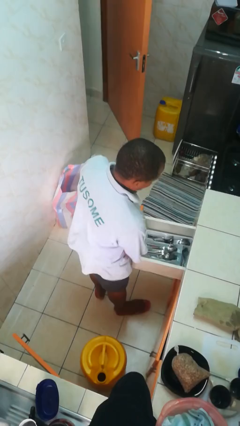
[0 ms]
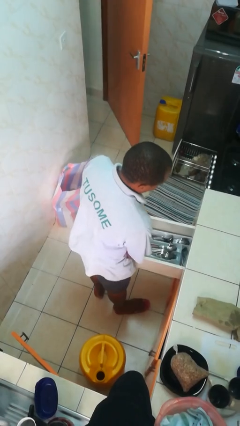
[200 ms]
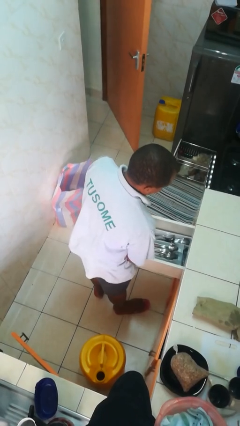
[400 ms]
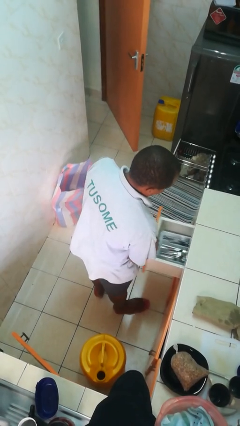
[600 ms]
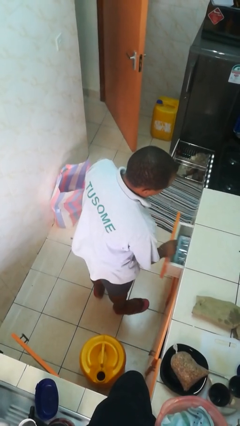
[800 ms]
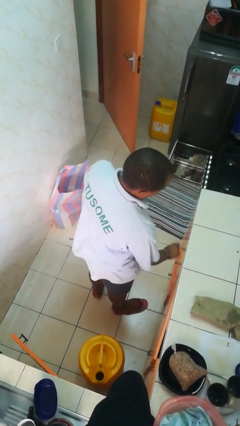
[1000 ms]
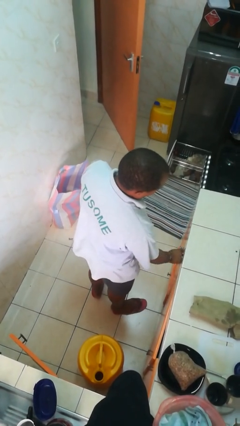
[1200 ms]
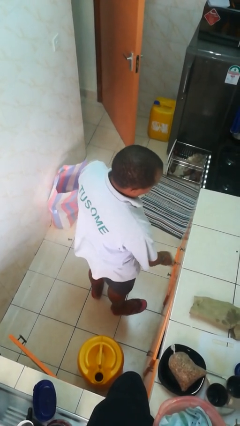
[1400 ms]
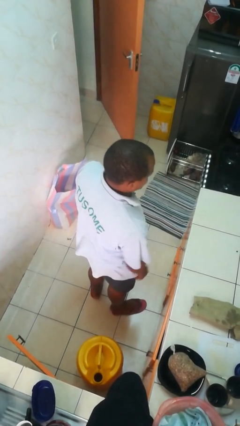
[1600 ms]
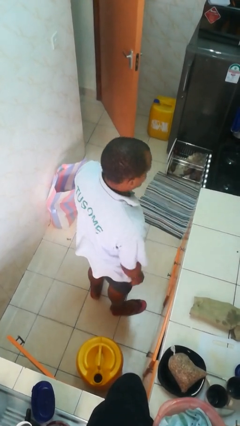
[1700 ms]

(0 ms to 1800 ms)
person closes kitchen drawer

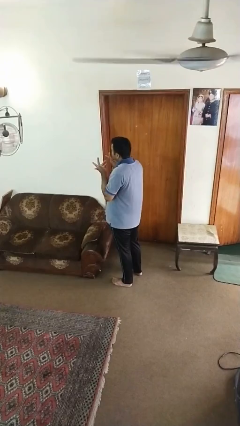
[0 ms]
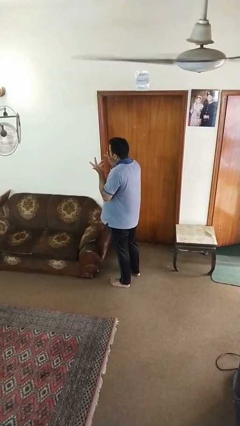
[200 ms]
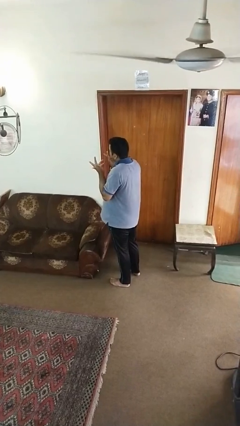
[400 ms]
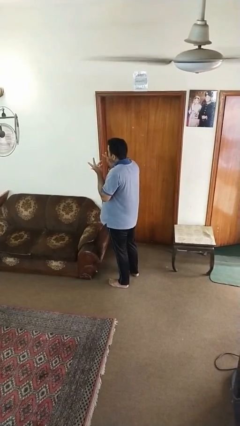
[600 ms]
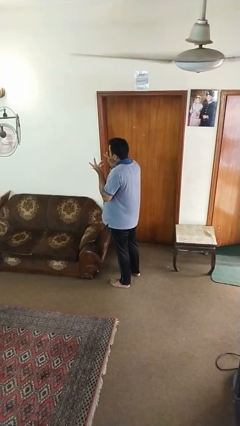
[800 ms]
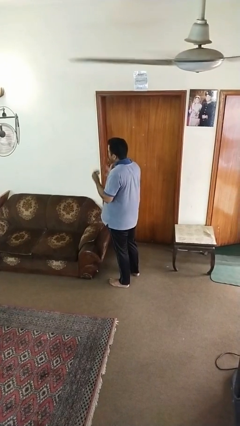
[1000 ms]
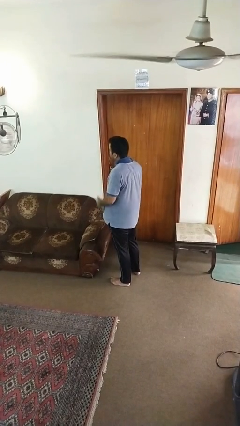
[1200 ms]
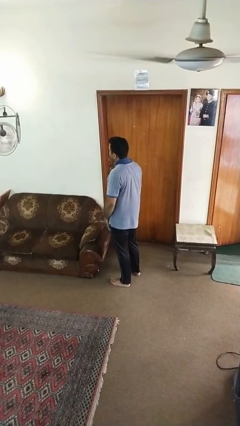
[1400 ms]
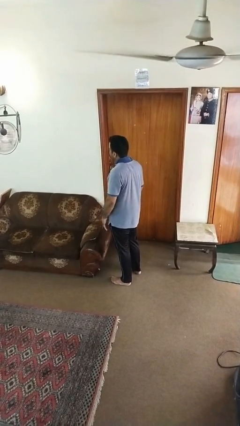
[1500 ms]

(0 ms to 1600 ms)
person shrugs

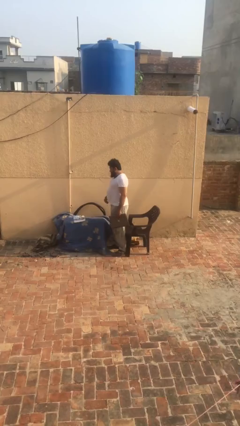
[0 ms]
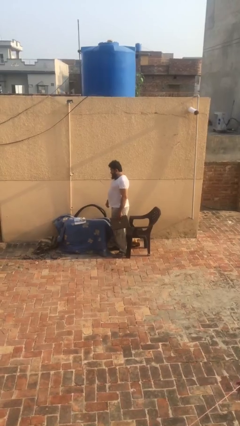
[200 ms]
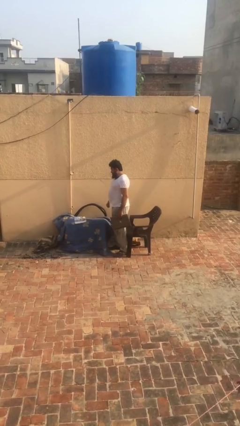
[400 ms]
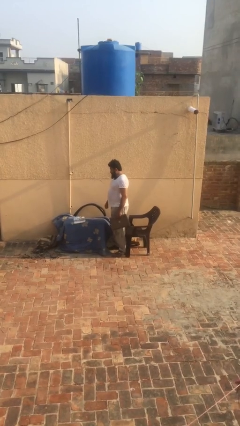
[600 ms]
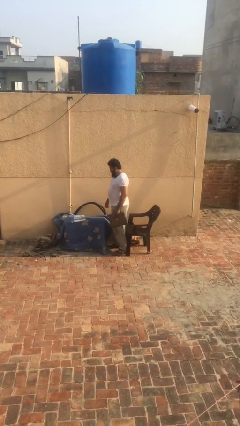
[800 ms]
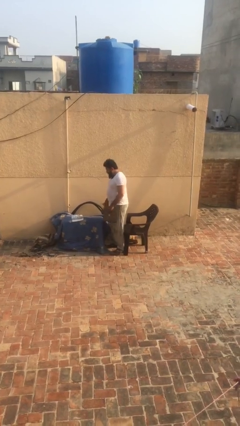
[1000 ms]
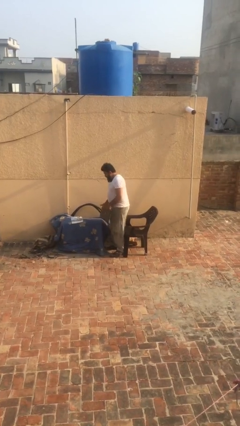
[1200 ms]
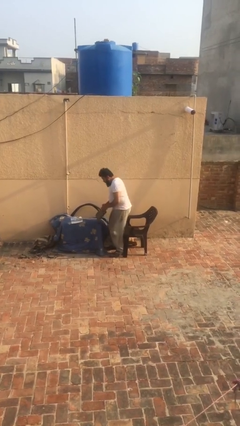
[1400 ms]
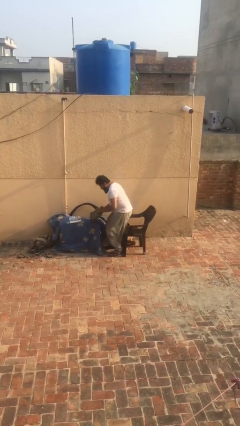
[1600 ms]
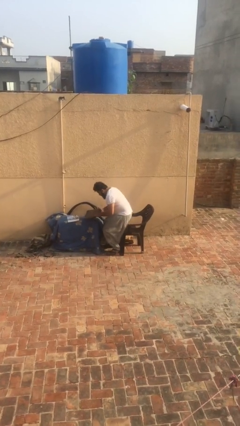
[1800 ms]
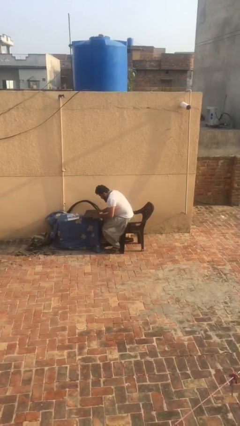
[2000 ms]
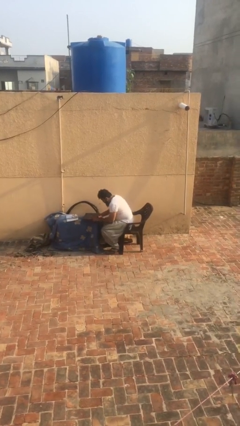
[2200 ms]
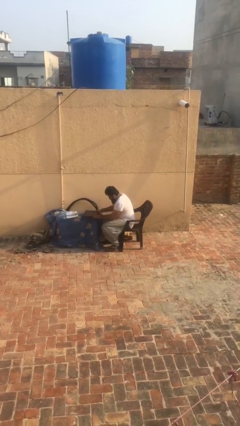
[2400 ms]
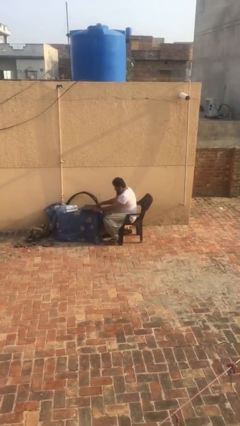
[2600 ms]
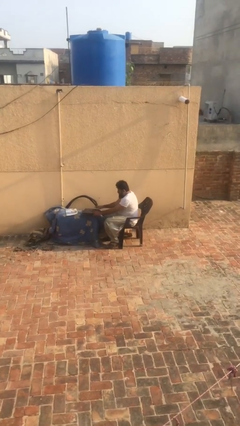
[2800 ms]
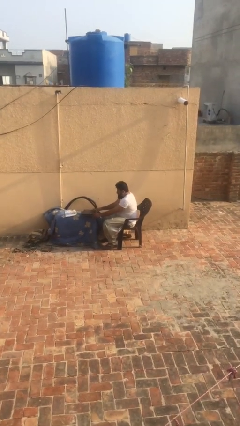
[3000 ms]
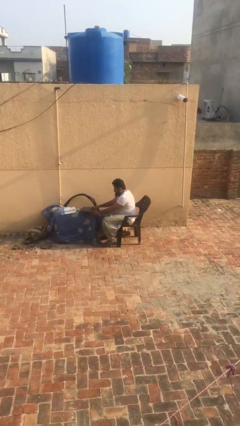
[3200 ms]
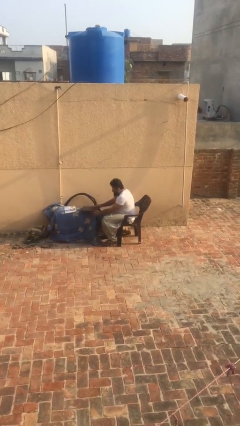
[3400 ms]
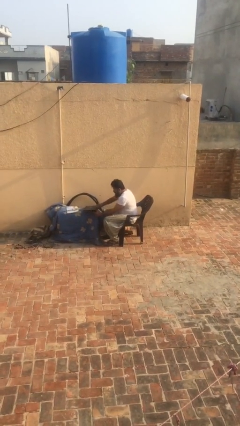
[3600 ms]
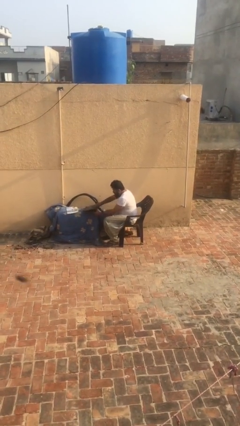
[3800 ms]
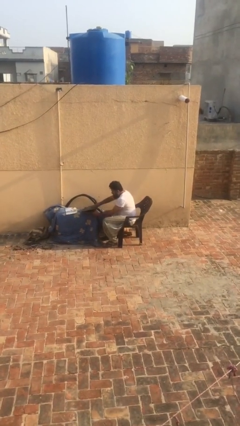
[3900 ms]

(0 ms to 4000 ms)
person sits down

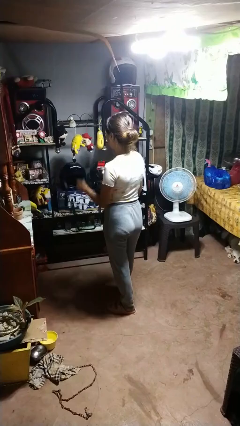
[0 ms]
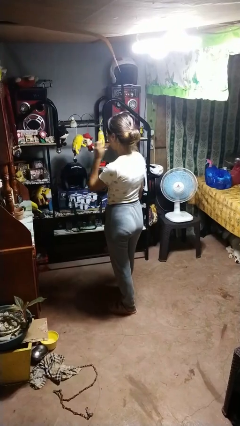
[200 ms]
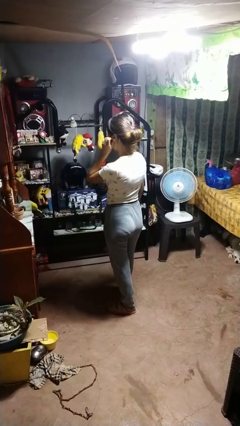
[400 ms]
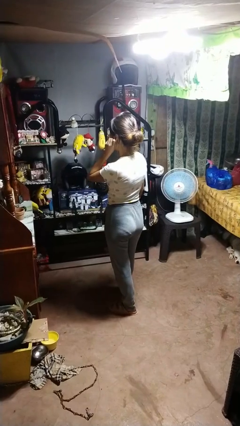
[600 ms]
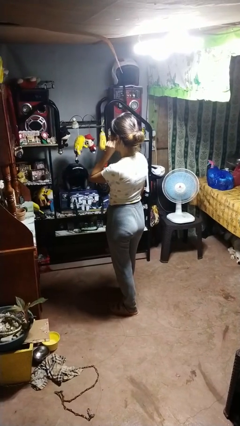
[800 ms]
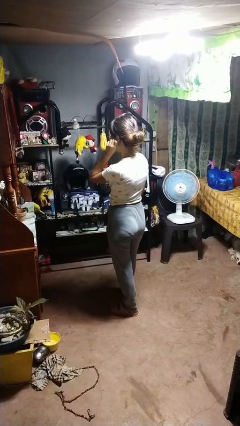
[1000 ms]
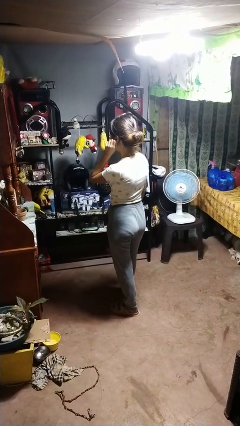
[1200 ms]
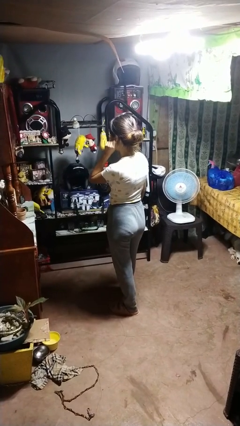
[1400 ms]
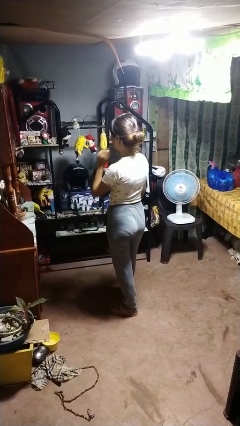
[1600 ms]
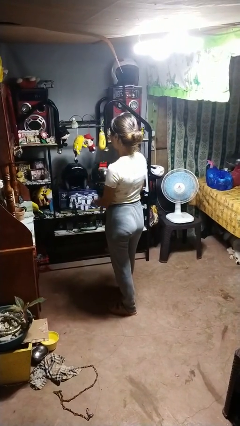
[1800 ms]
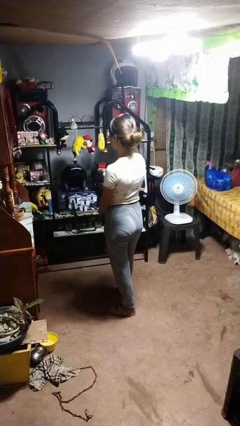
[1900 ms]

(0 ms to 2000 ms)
person touches earlobe

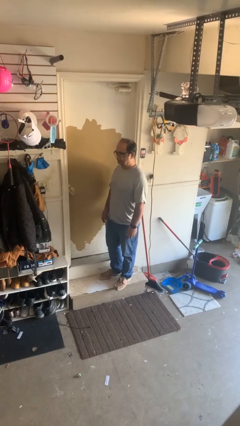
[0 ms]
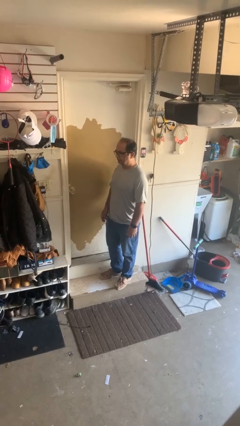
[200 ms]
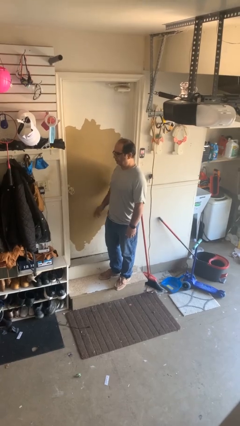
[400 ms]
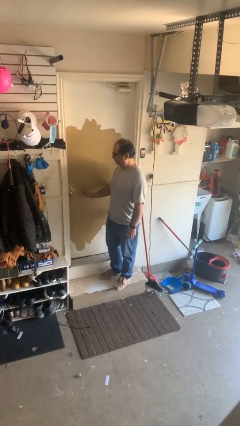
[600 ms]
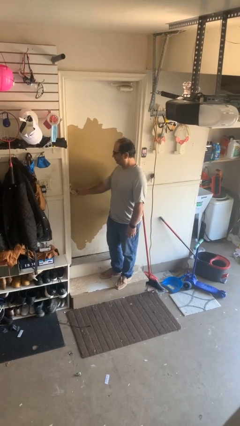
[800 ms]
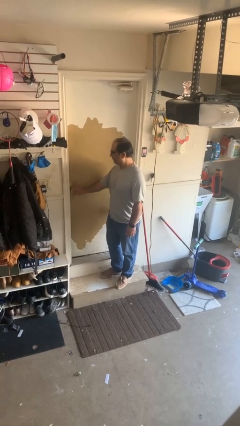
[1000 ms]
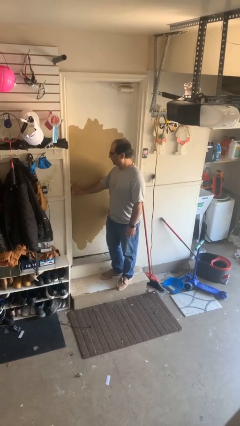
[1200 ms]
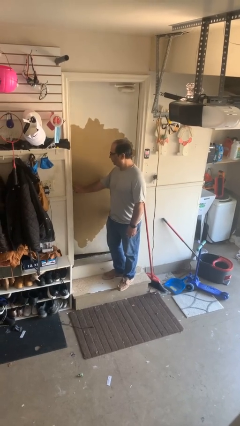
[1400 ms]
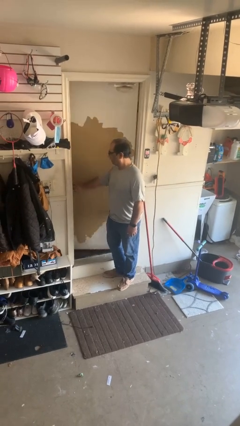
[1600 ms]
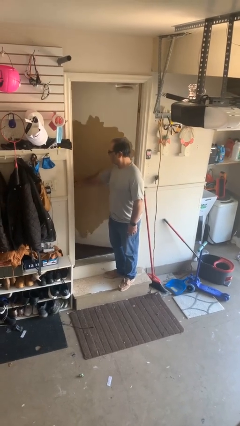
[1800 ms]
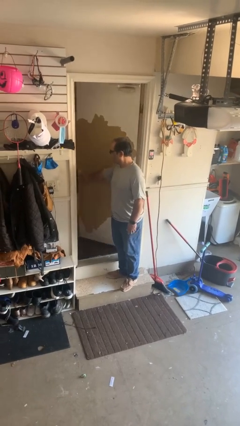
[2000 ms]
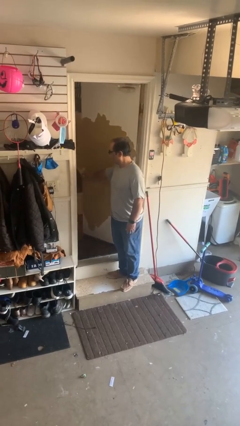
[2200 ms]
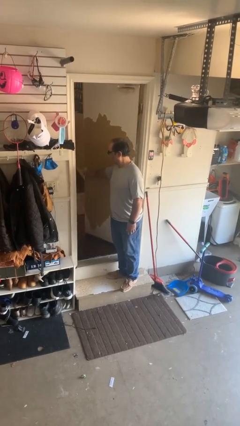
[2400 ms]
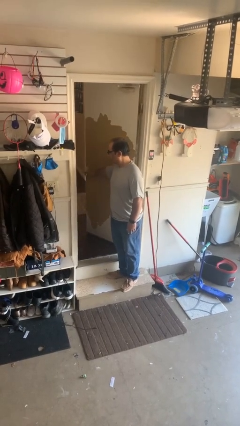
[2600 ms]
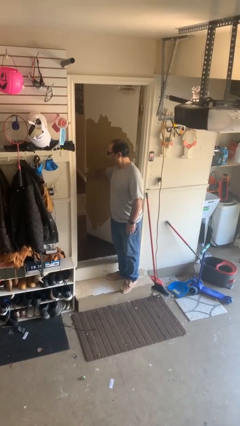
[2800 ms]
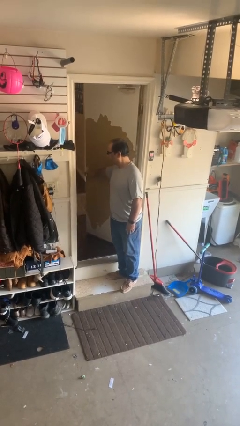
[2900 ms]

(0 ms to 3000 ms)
person opens facility door

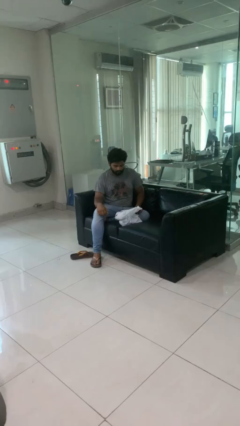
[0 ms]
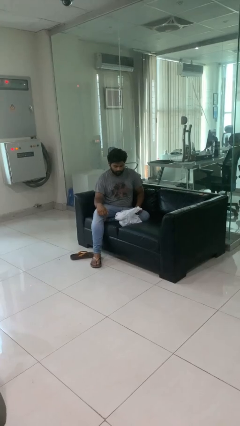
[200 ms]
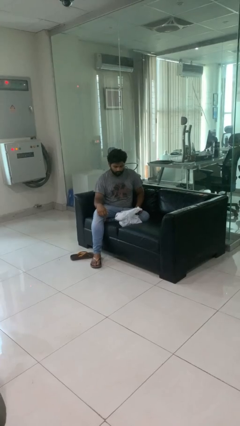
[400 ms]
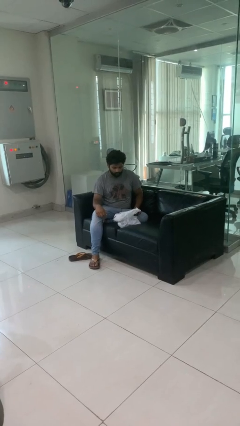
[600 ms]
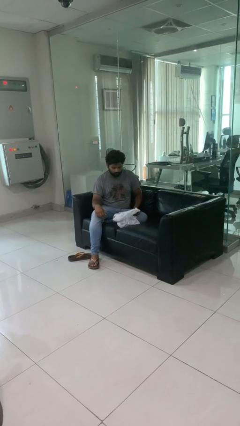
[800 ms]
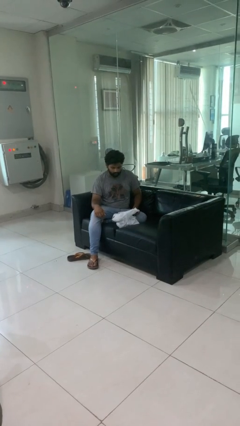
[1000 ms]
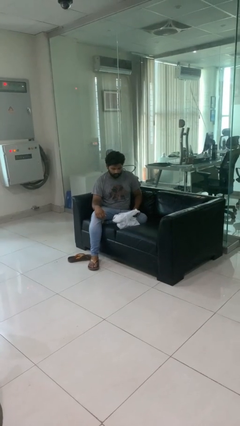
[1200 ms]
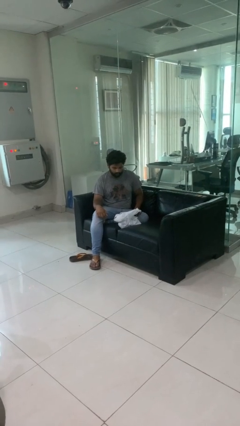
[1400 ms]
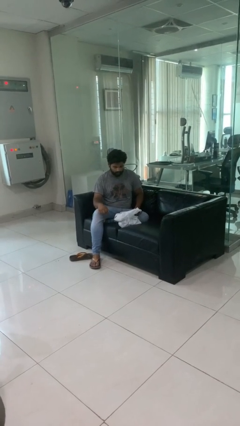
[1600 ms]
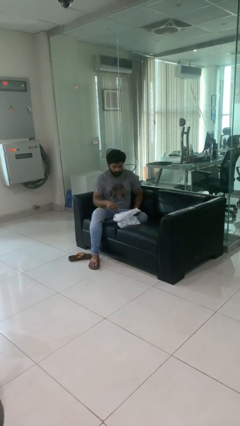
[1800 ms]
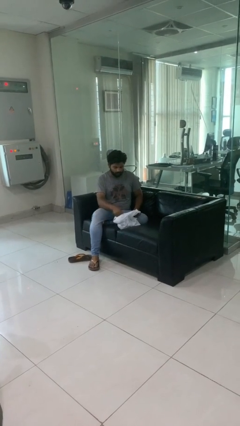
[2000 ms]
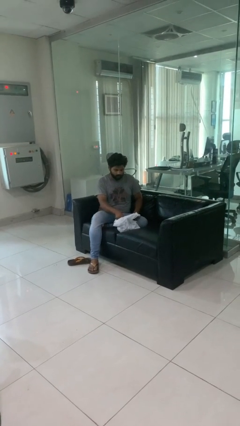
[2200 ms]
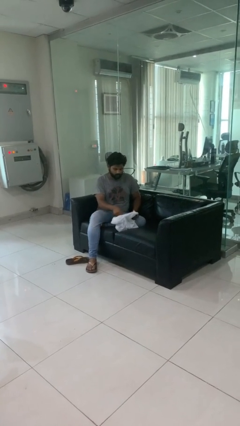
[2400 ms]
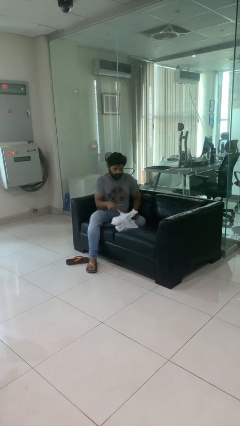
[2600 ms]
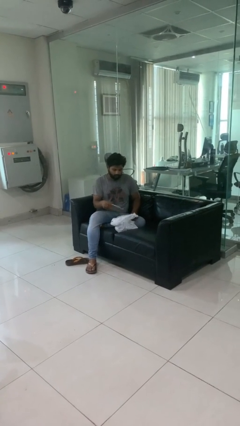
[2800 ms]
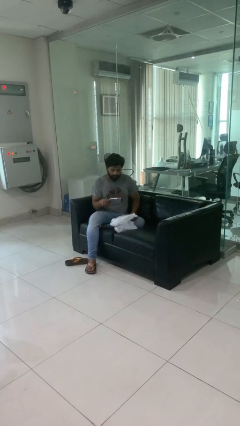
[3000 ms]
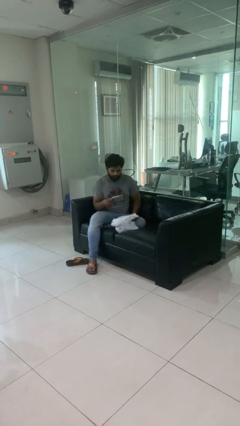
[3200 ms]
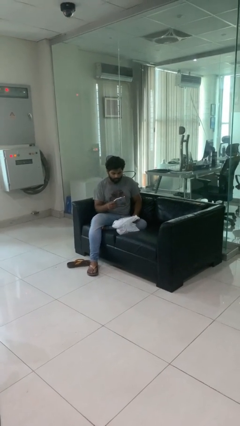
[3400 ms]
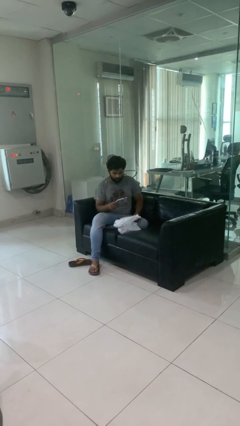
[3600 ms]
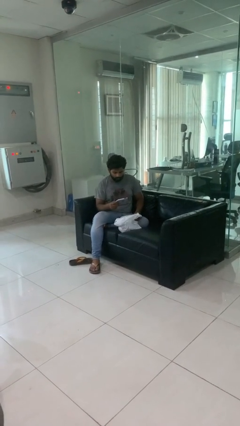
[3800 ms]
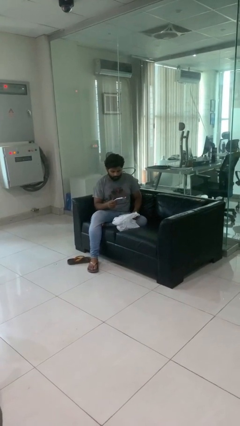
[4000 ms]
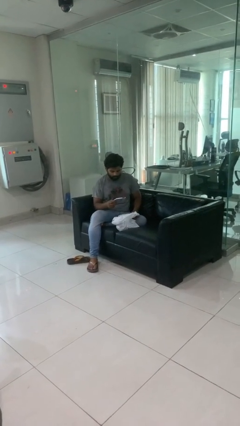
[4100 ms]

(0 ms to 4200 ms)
person takes object from bag

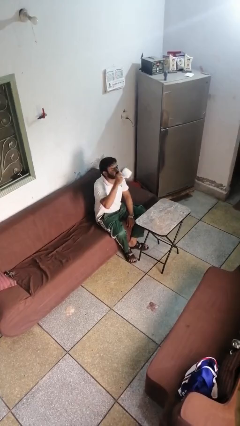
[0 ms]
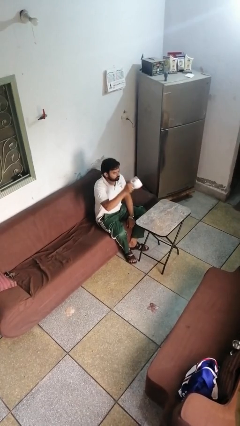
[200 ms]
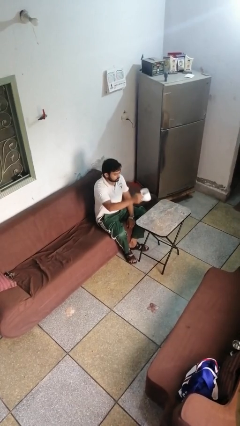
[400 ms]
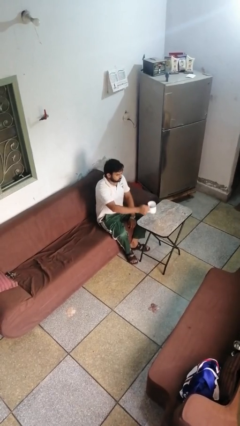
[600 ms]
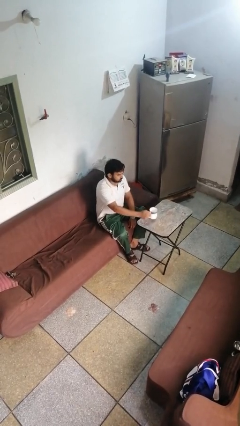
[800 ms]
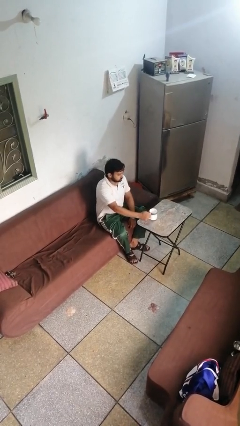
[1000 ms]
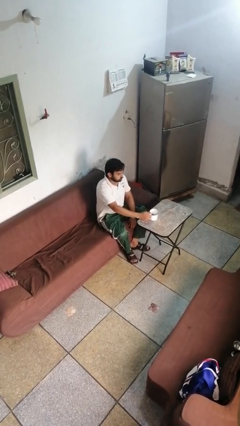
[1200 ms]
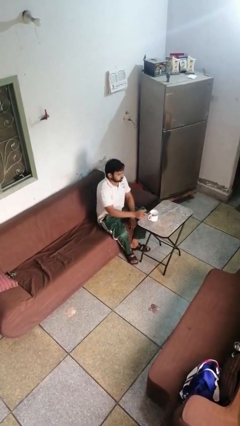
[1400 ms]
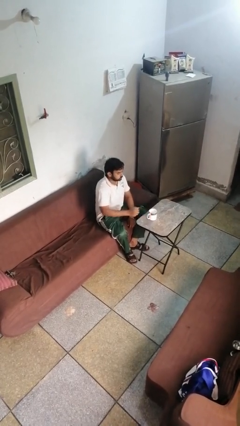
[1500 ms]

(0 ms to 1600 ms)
person puts down object on table
